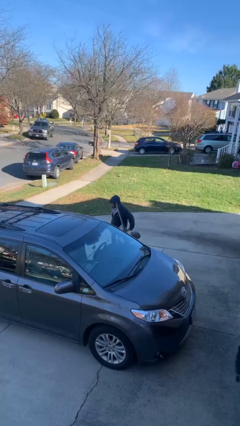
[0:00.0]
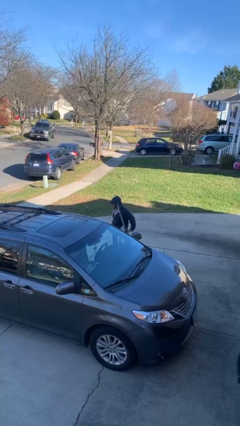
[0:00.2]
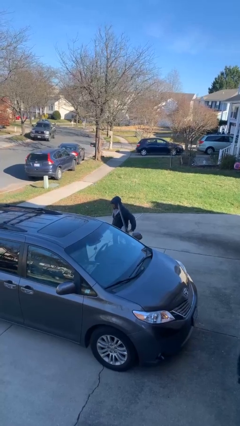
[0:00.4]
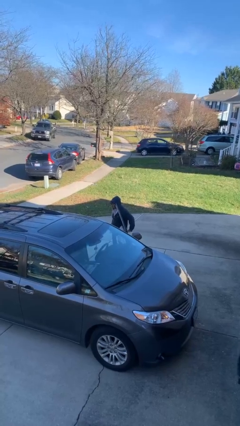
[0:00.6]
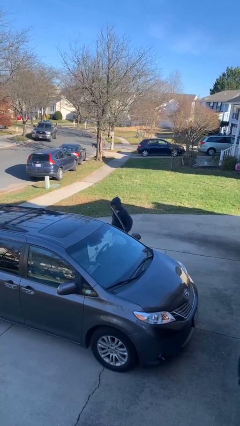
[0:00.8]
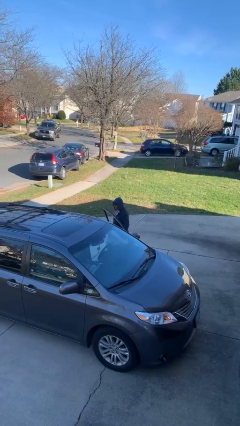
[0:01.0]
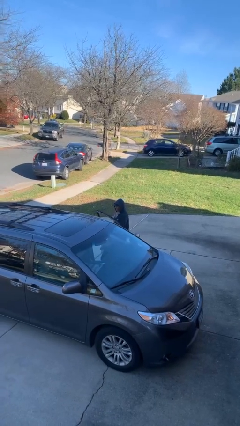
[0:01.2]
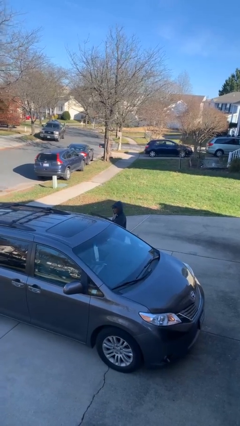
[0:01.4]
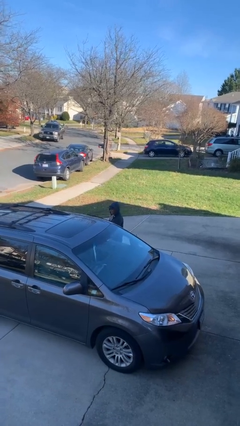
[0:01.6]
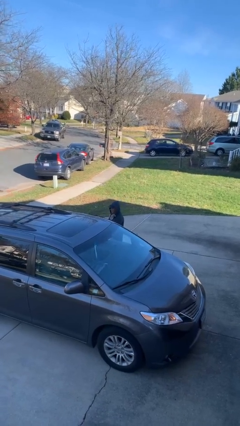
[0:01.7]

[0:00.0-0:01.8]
person closes car door

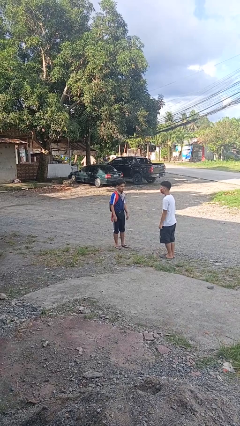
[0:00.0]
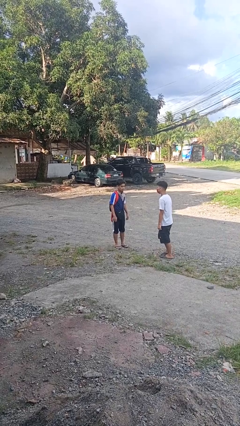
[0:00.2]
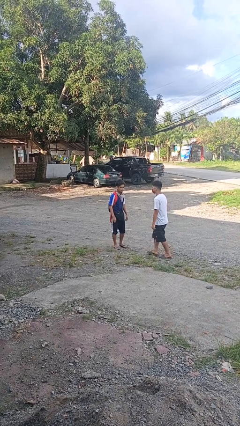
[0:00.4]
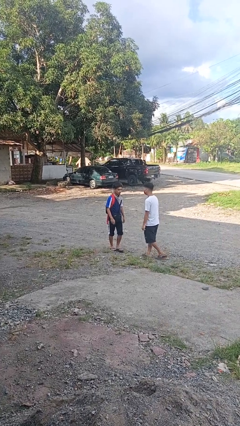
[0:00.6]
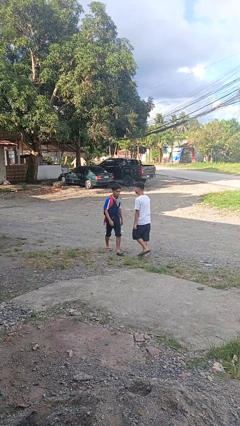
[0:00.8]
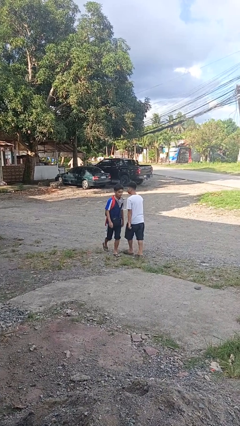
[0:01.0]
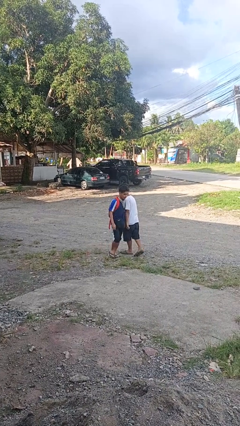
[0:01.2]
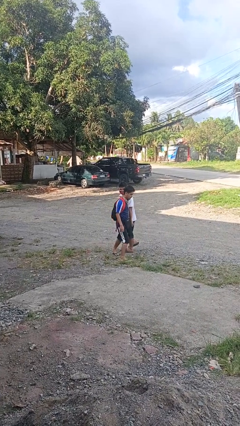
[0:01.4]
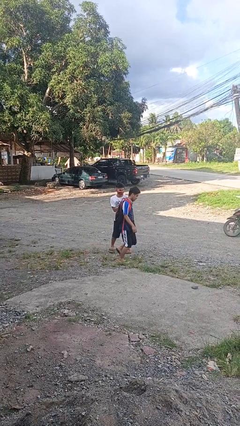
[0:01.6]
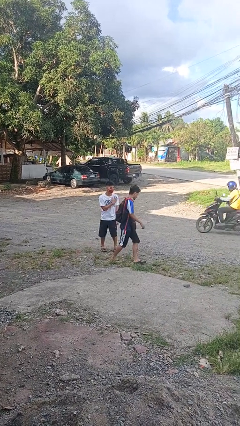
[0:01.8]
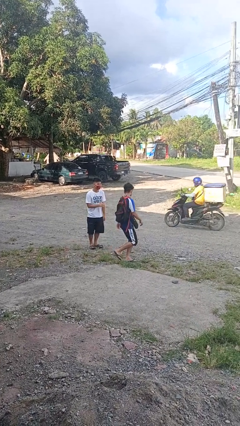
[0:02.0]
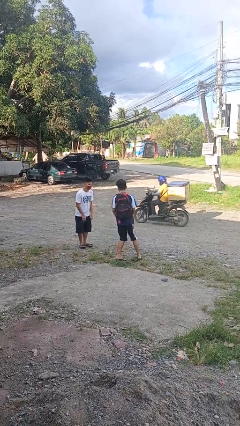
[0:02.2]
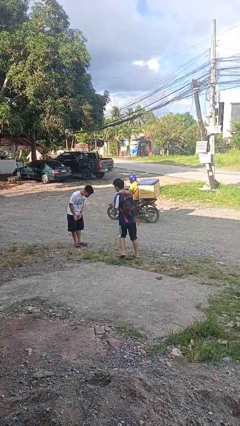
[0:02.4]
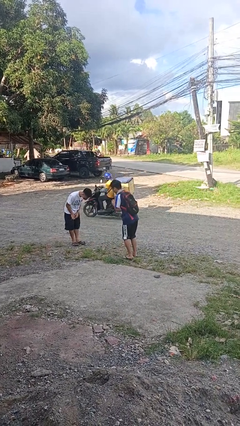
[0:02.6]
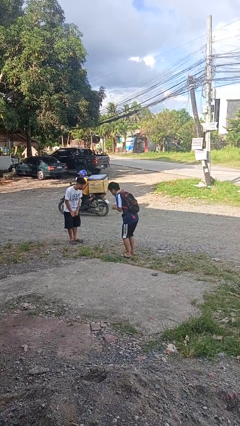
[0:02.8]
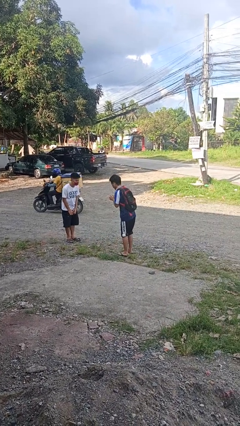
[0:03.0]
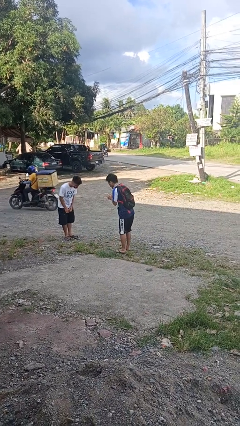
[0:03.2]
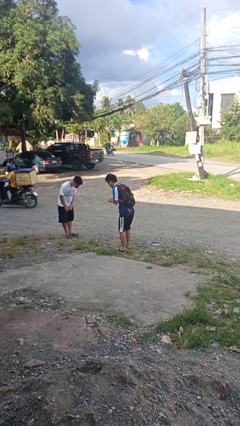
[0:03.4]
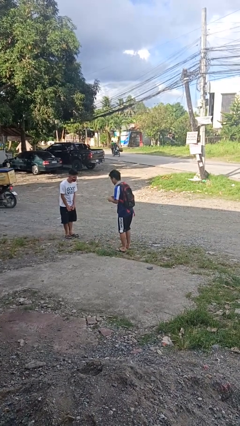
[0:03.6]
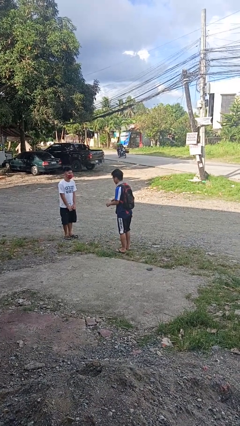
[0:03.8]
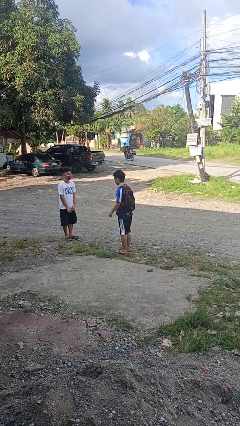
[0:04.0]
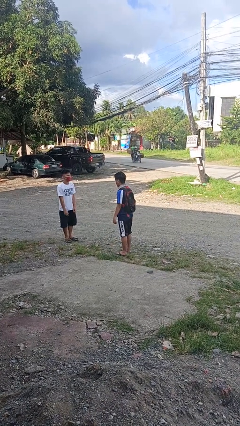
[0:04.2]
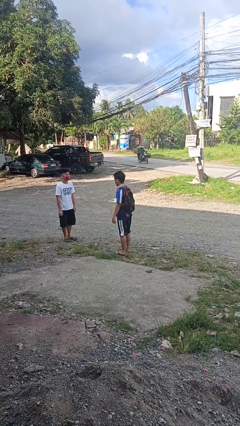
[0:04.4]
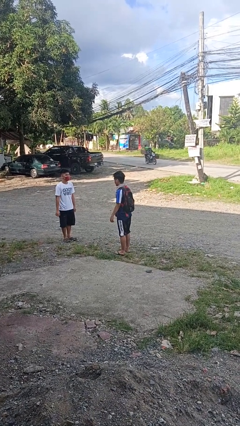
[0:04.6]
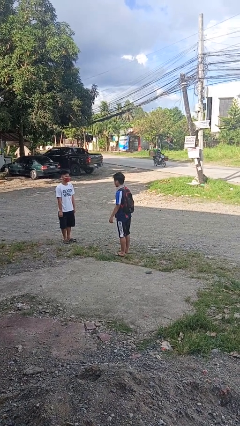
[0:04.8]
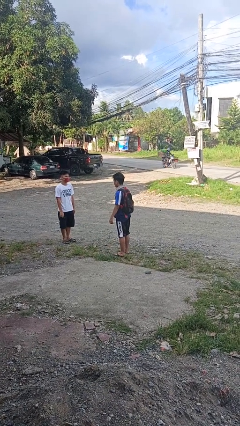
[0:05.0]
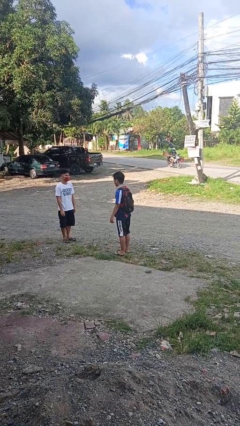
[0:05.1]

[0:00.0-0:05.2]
person bumps into person

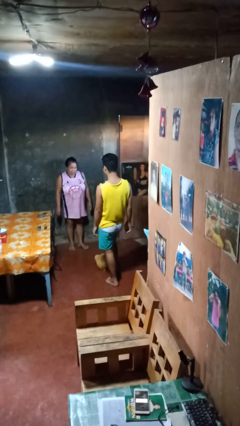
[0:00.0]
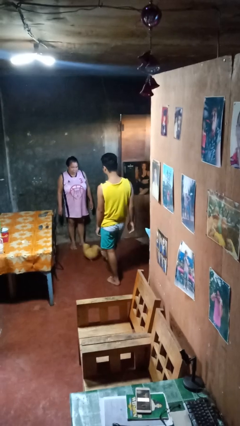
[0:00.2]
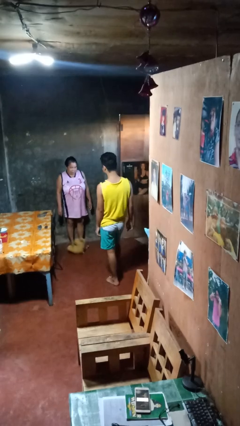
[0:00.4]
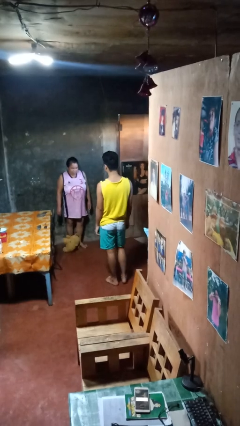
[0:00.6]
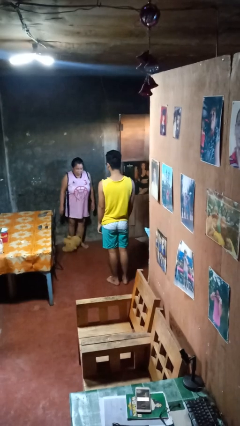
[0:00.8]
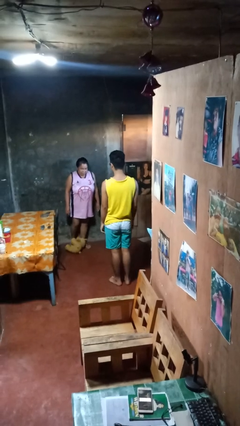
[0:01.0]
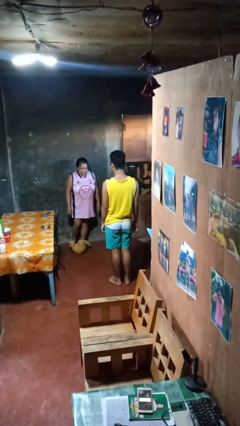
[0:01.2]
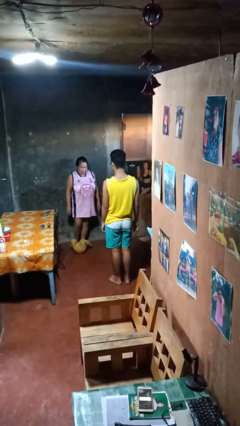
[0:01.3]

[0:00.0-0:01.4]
person kicks object to person

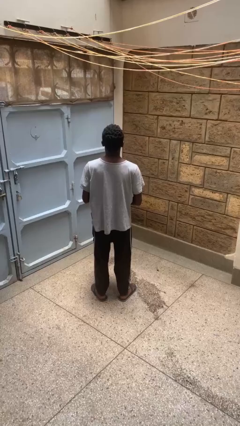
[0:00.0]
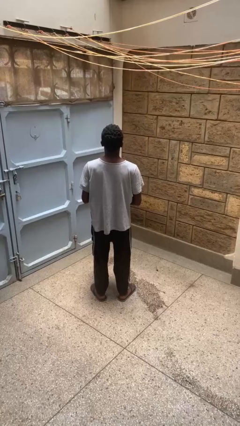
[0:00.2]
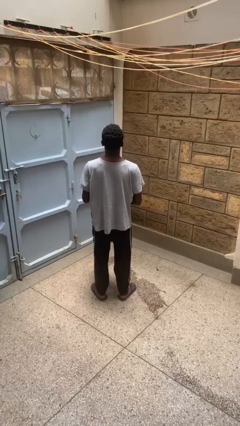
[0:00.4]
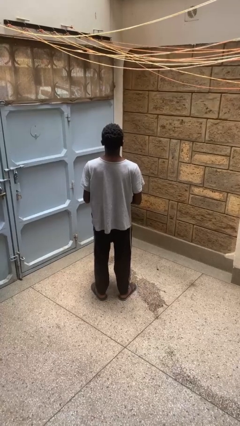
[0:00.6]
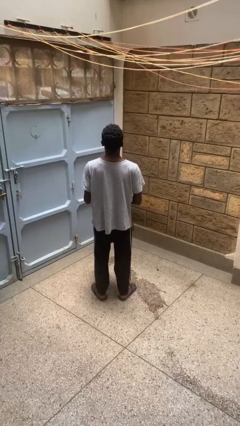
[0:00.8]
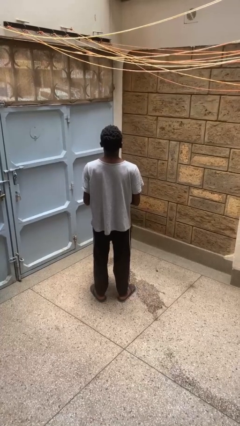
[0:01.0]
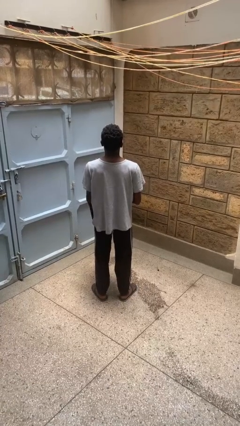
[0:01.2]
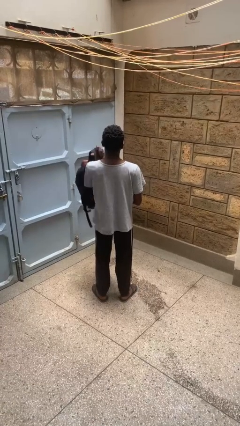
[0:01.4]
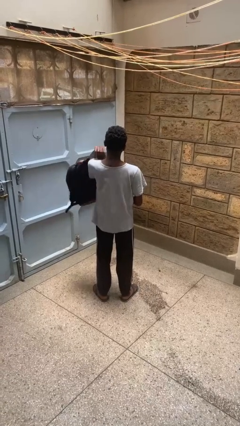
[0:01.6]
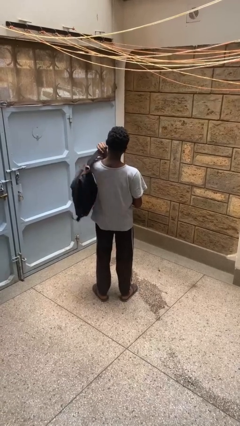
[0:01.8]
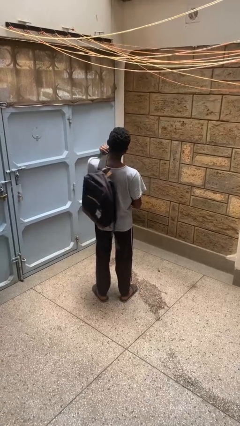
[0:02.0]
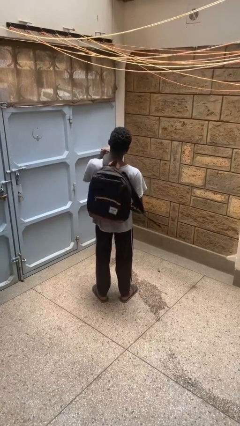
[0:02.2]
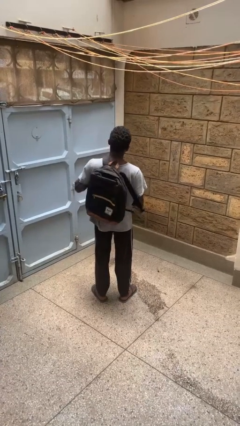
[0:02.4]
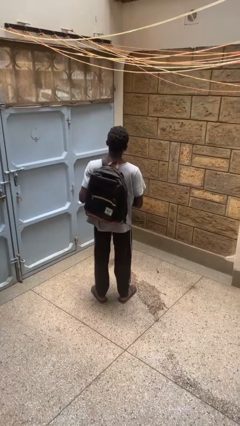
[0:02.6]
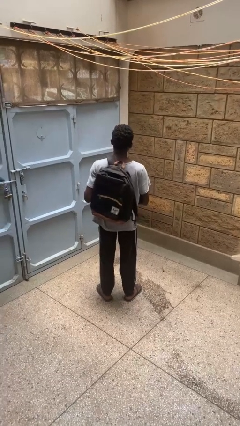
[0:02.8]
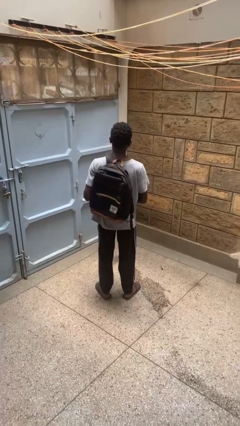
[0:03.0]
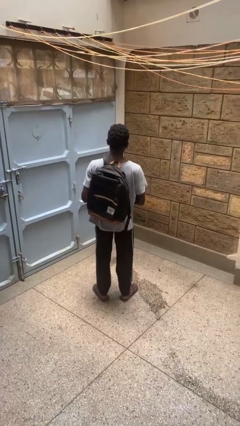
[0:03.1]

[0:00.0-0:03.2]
person puts on backpack

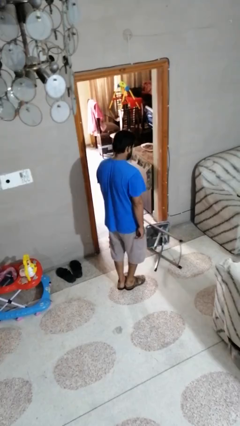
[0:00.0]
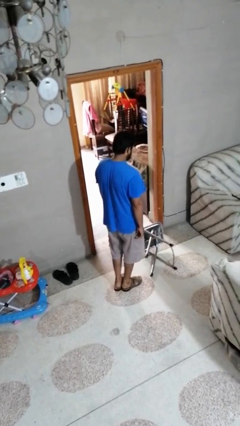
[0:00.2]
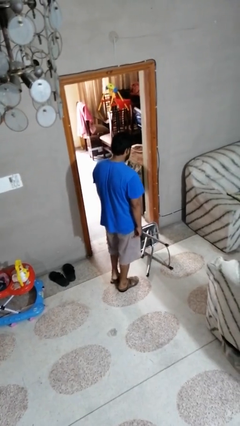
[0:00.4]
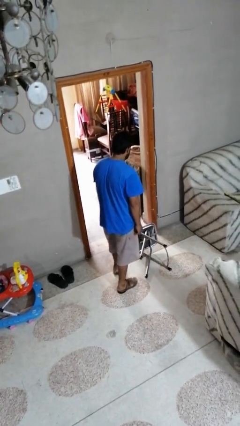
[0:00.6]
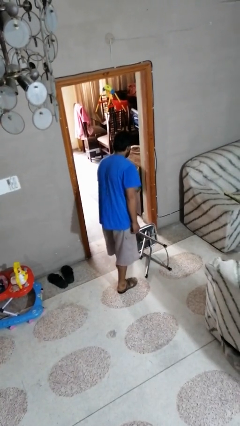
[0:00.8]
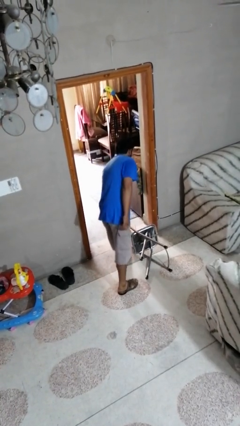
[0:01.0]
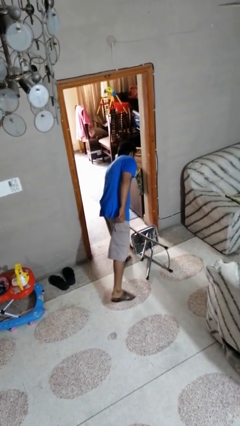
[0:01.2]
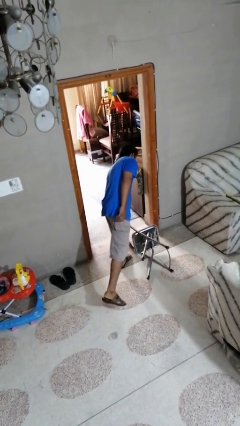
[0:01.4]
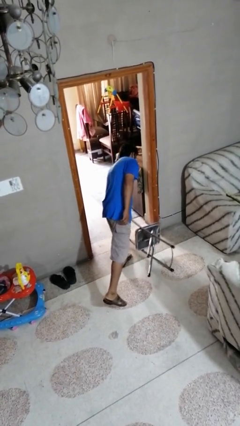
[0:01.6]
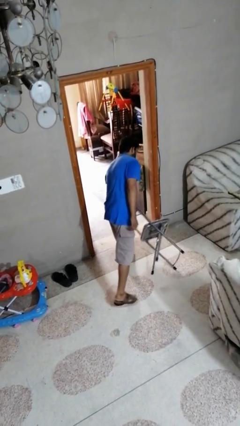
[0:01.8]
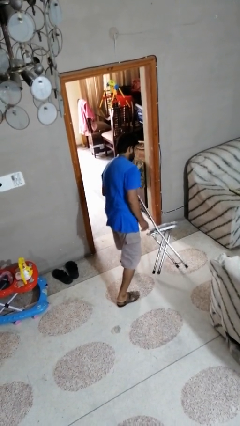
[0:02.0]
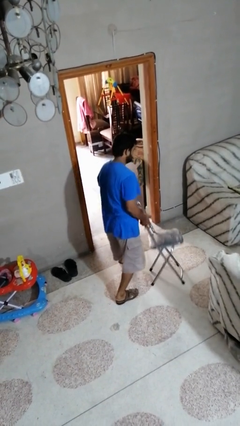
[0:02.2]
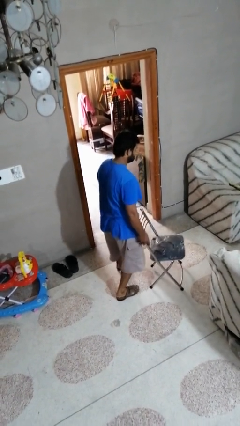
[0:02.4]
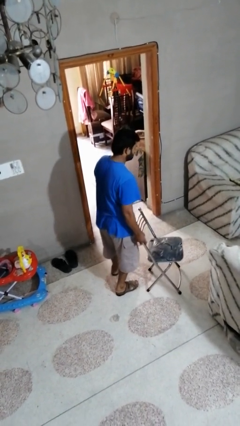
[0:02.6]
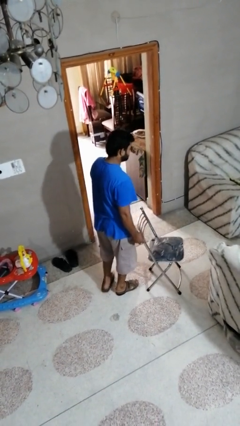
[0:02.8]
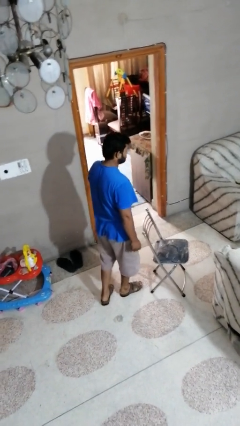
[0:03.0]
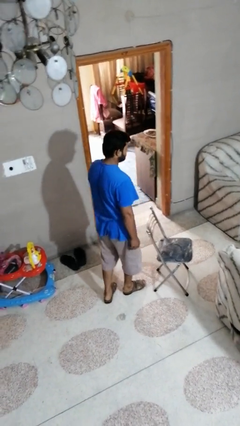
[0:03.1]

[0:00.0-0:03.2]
person sets upright furniture

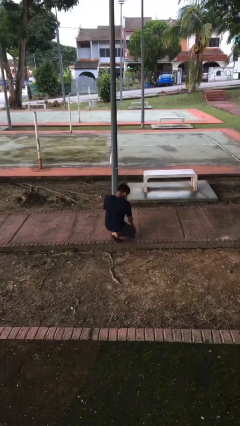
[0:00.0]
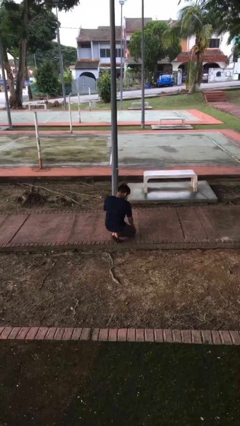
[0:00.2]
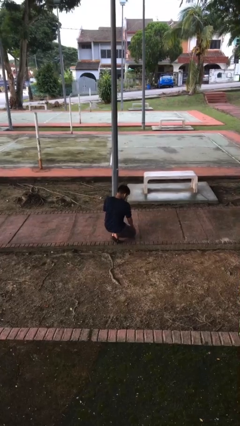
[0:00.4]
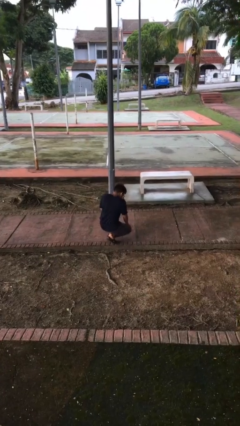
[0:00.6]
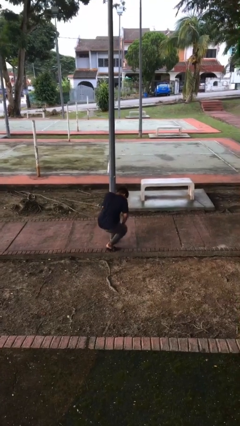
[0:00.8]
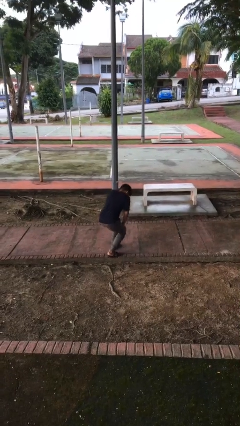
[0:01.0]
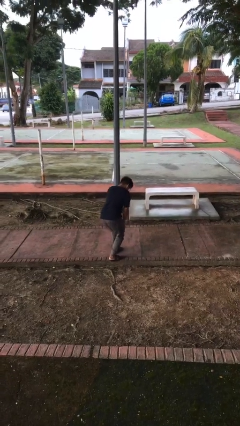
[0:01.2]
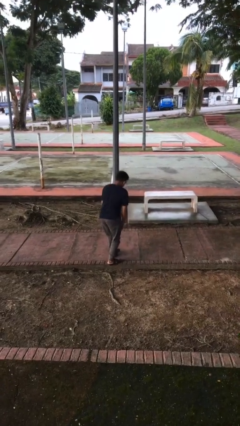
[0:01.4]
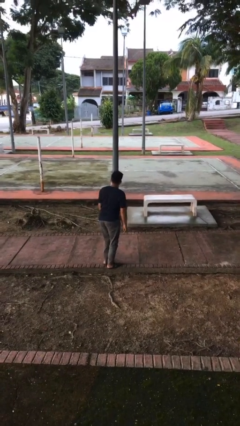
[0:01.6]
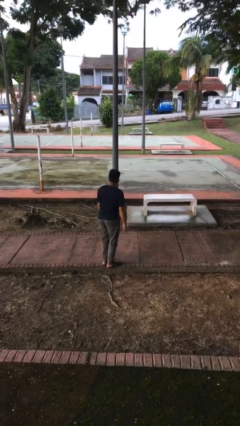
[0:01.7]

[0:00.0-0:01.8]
person stands up from floor

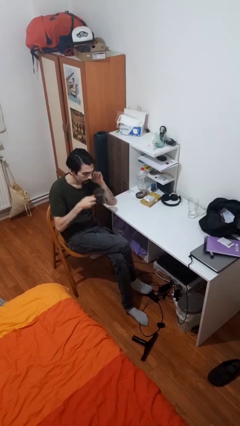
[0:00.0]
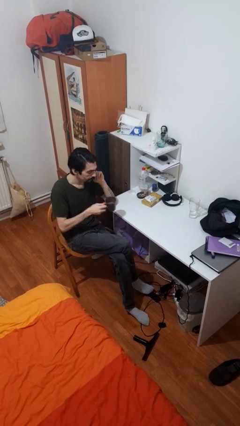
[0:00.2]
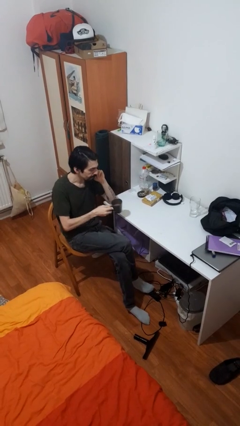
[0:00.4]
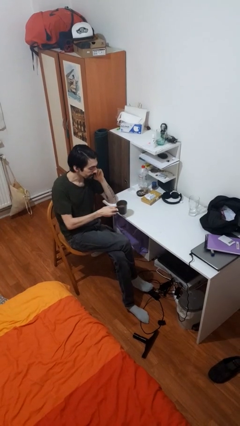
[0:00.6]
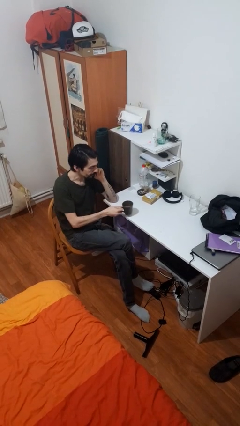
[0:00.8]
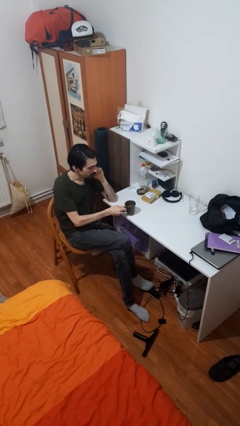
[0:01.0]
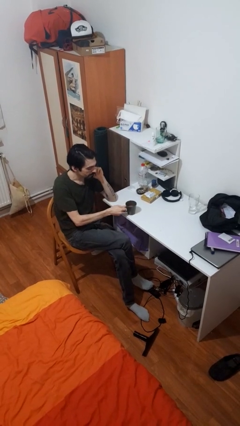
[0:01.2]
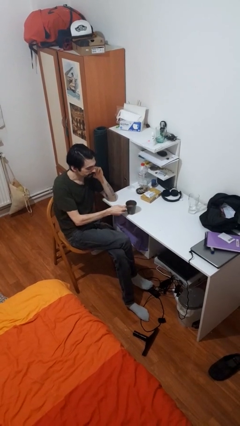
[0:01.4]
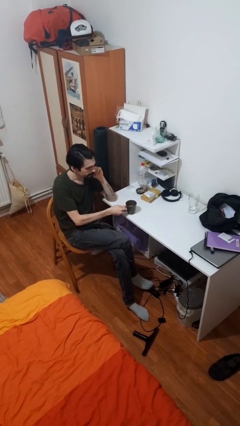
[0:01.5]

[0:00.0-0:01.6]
person puts down object on table
